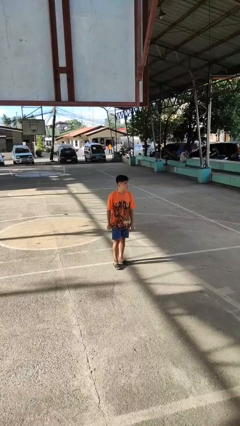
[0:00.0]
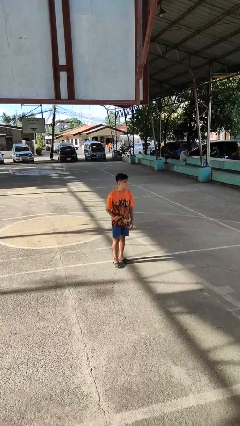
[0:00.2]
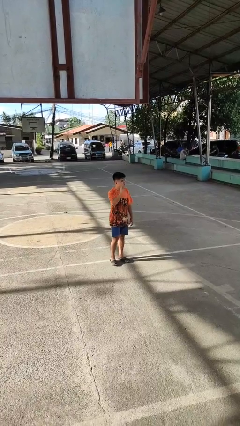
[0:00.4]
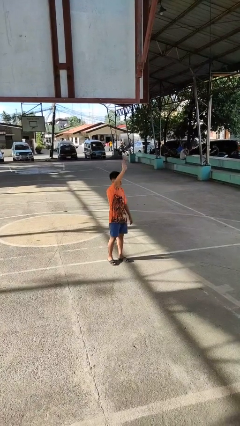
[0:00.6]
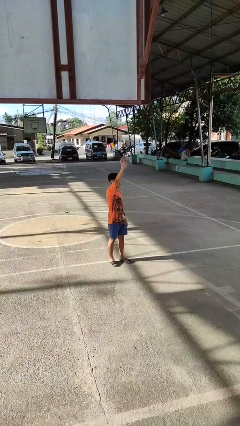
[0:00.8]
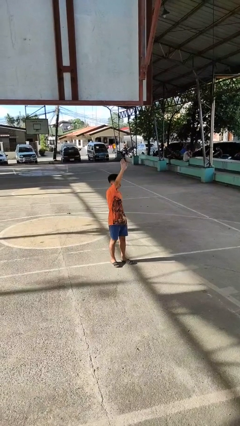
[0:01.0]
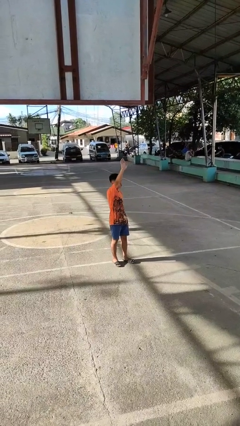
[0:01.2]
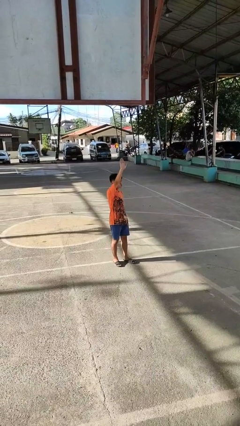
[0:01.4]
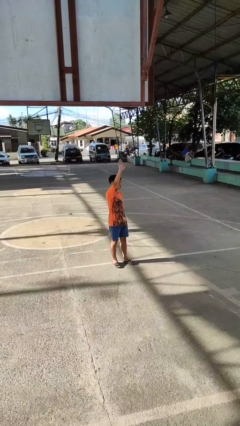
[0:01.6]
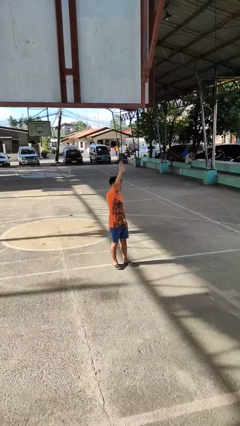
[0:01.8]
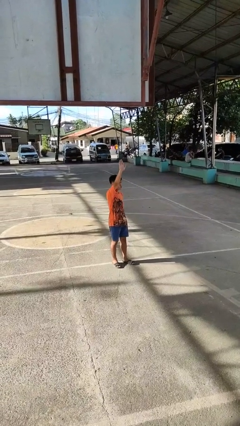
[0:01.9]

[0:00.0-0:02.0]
person gestures raise hand

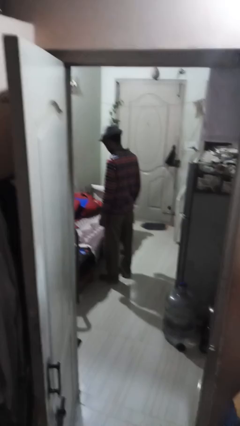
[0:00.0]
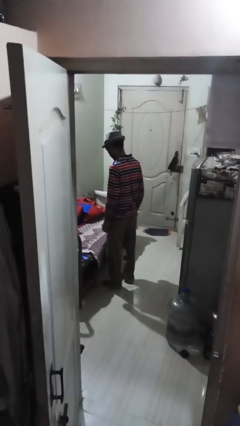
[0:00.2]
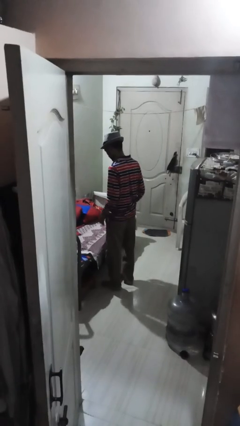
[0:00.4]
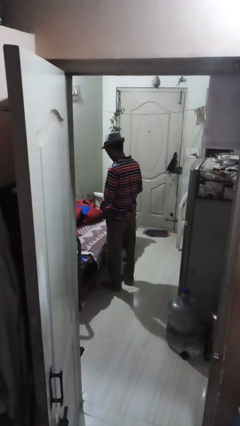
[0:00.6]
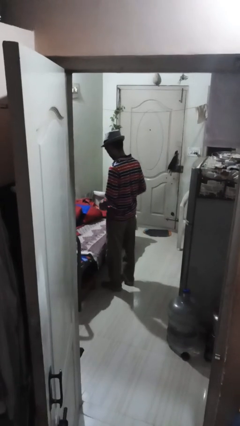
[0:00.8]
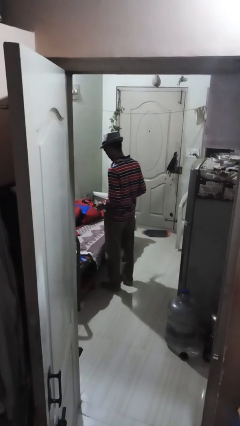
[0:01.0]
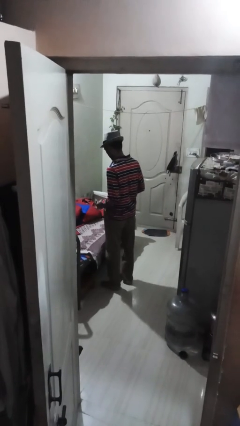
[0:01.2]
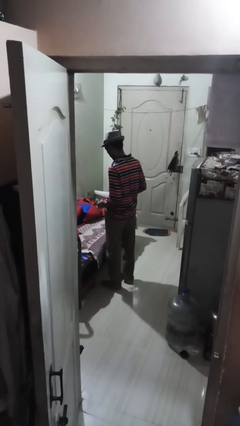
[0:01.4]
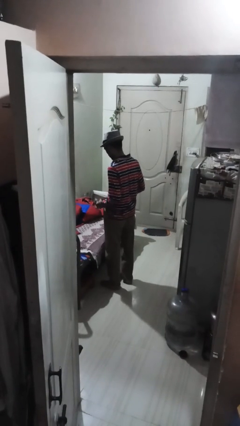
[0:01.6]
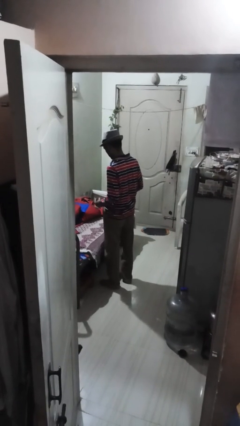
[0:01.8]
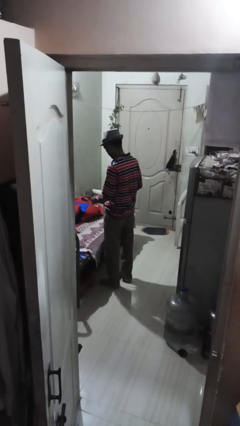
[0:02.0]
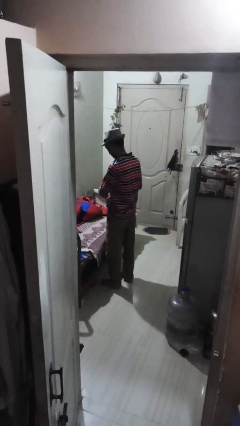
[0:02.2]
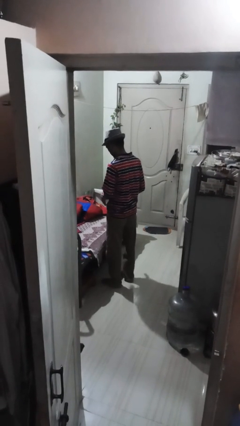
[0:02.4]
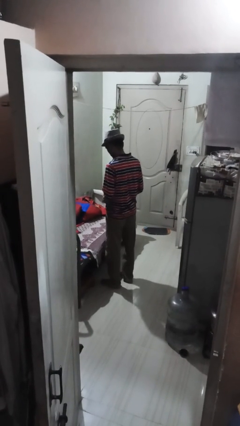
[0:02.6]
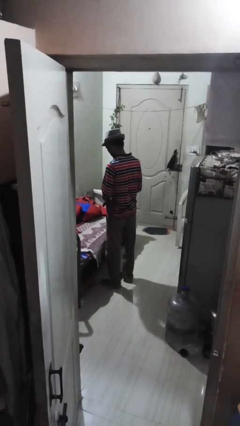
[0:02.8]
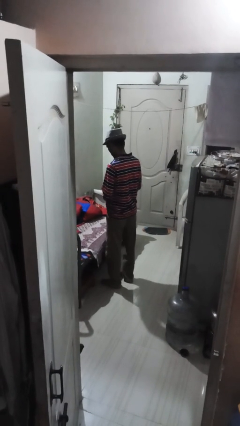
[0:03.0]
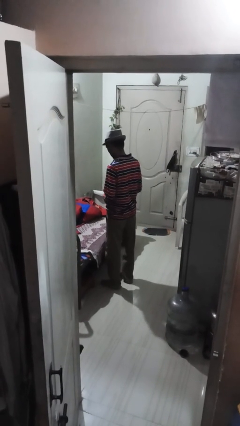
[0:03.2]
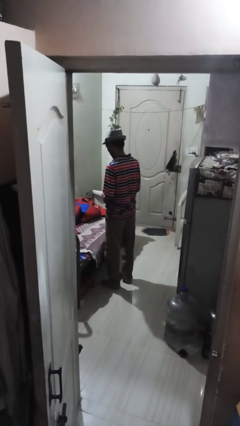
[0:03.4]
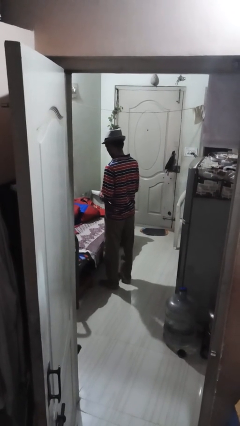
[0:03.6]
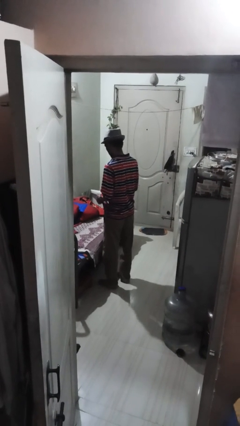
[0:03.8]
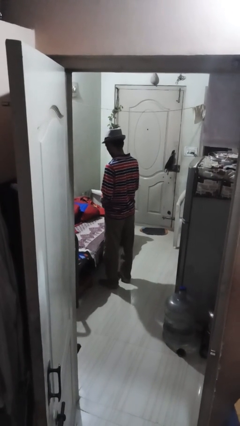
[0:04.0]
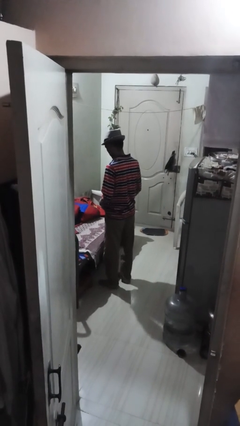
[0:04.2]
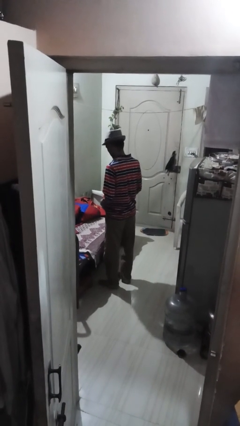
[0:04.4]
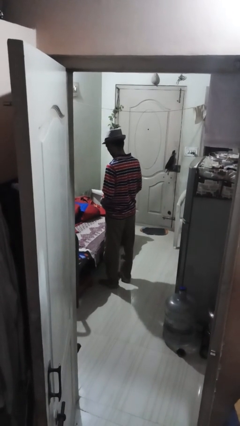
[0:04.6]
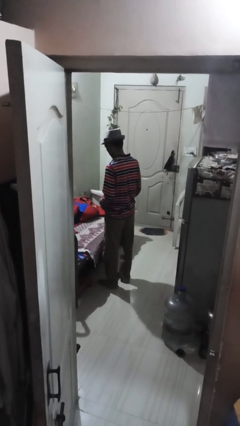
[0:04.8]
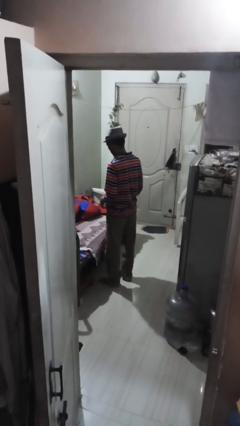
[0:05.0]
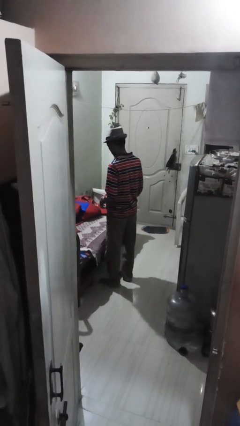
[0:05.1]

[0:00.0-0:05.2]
person puts on belt

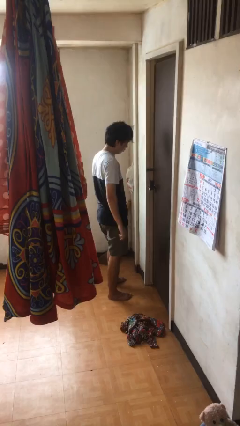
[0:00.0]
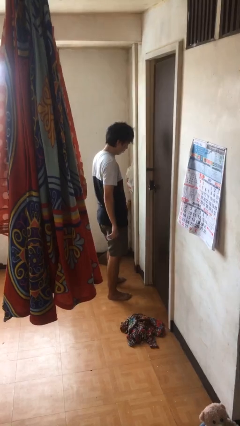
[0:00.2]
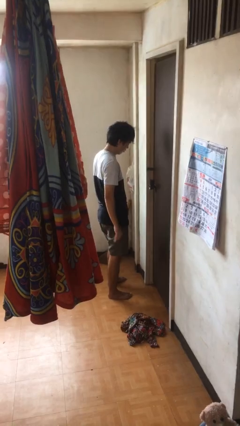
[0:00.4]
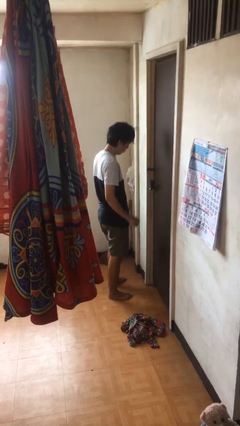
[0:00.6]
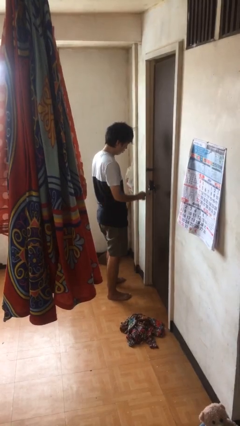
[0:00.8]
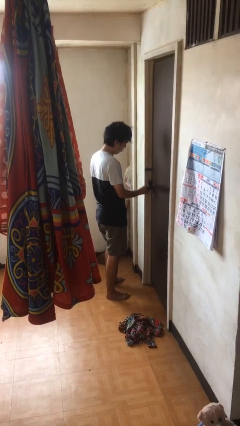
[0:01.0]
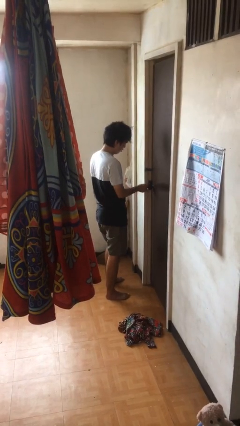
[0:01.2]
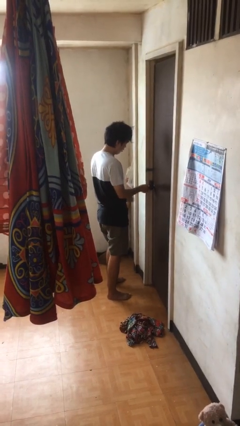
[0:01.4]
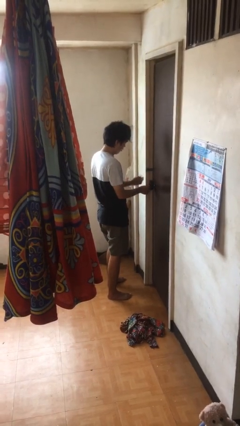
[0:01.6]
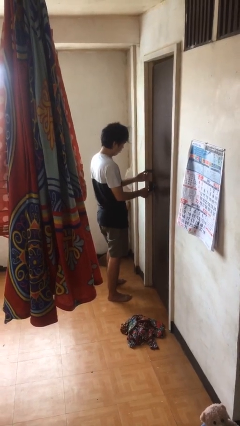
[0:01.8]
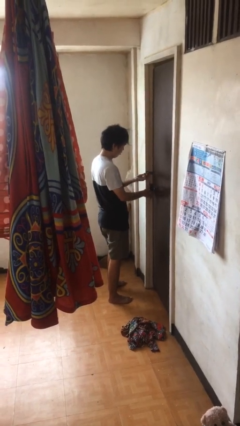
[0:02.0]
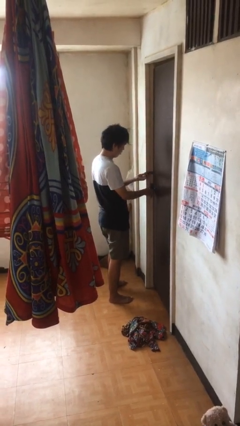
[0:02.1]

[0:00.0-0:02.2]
person unlocks door with keys

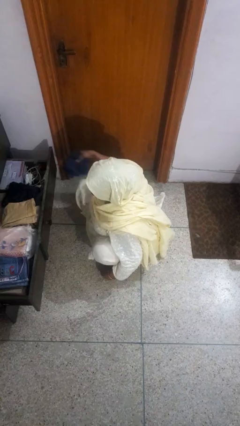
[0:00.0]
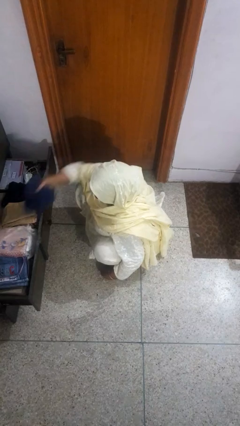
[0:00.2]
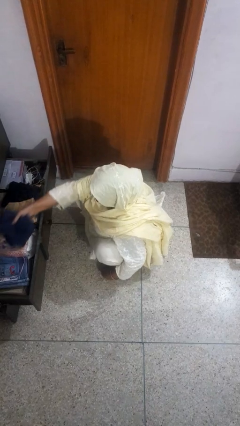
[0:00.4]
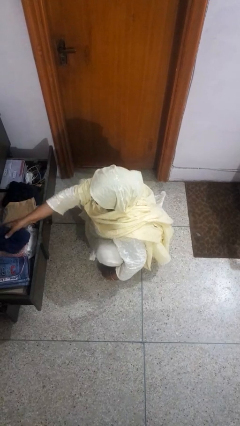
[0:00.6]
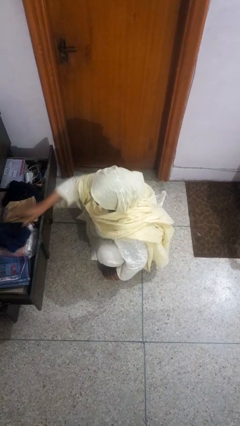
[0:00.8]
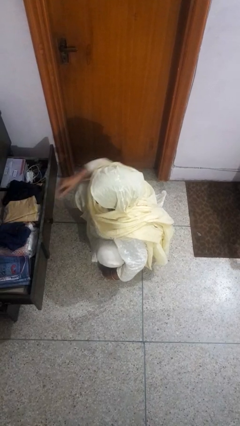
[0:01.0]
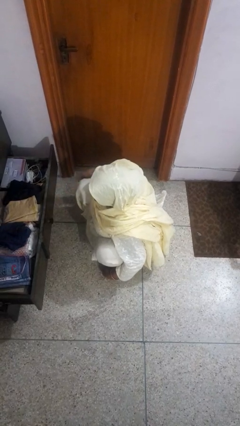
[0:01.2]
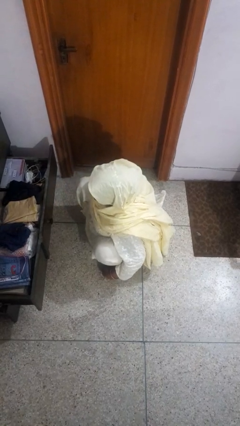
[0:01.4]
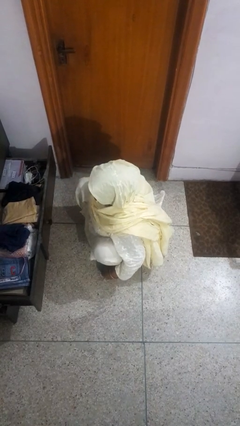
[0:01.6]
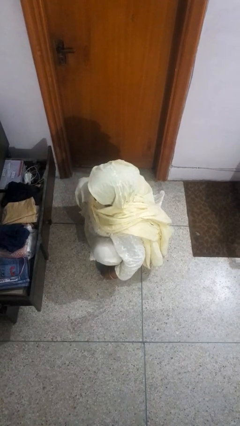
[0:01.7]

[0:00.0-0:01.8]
person puts clothes into dresser

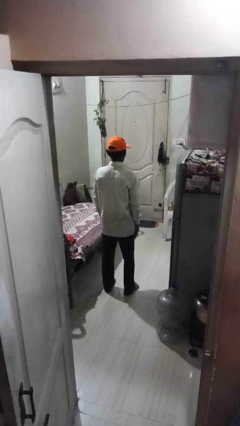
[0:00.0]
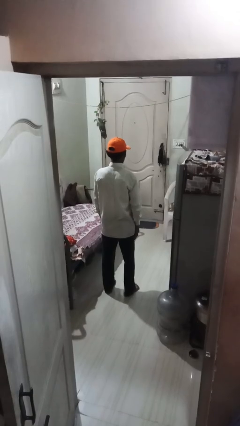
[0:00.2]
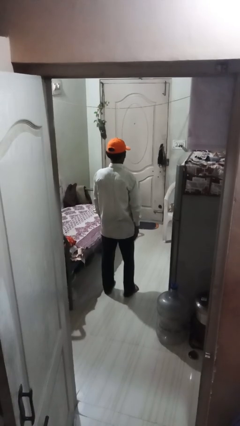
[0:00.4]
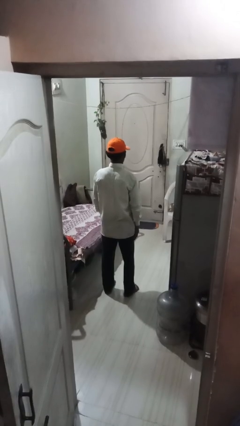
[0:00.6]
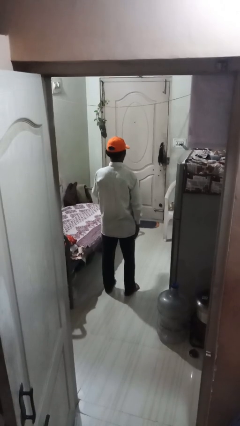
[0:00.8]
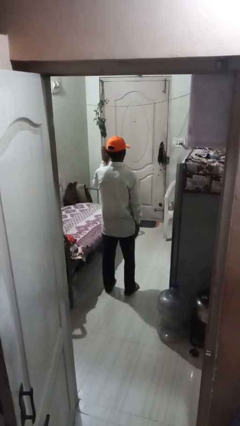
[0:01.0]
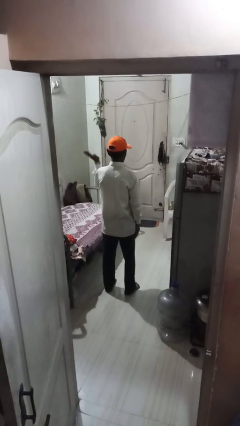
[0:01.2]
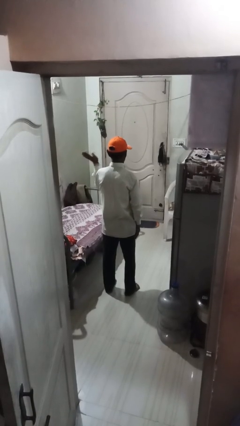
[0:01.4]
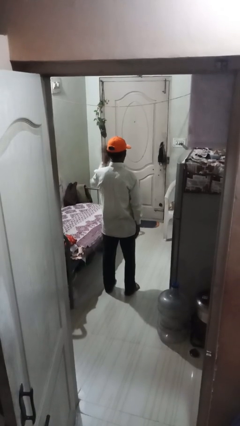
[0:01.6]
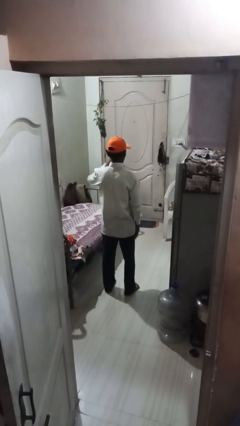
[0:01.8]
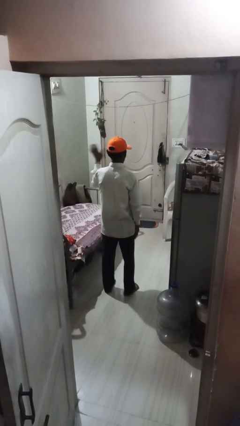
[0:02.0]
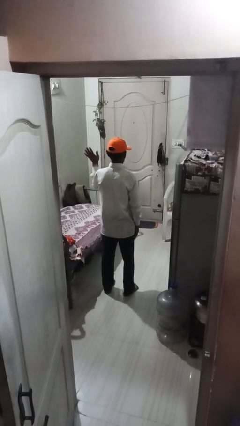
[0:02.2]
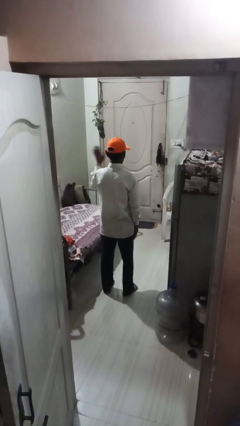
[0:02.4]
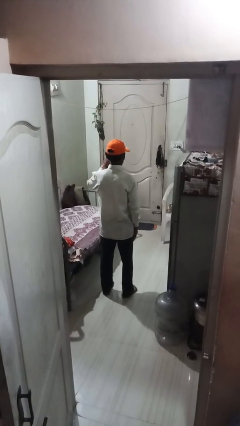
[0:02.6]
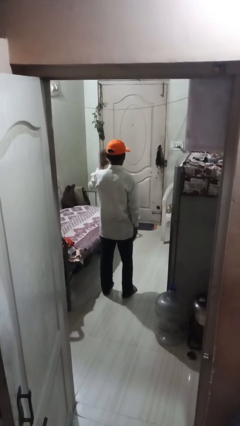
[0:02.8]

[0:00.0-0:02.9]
person waves at person

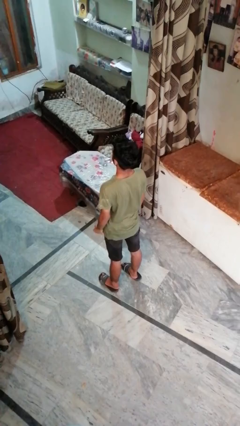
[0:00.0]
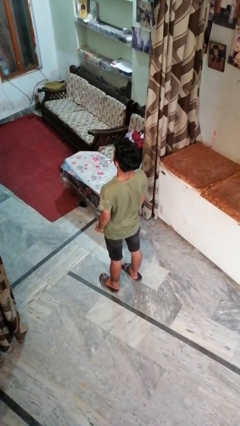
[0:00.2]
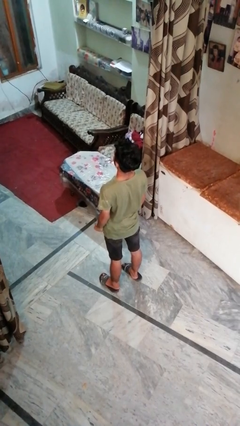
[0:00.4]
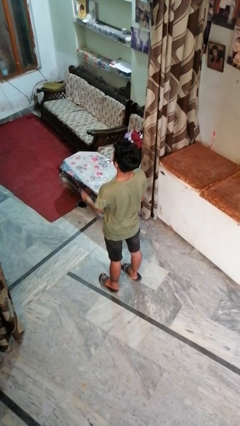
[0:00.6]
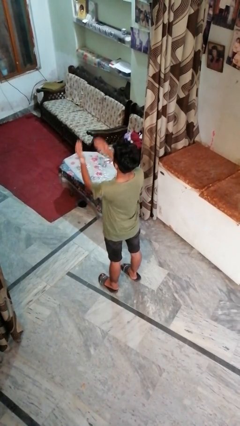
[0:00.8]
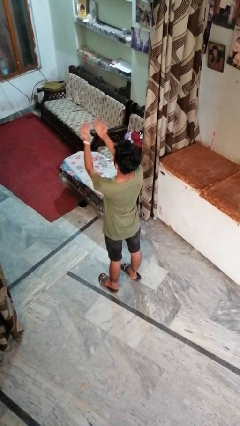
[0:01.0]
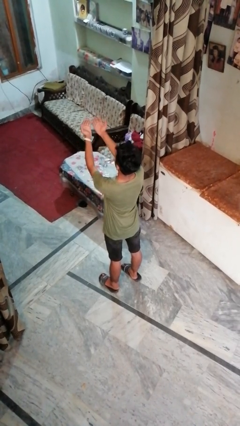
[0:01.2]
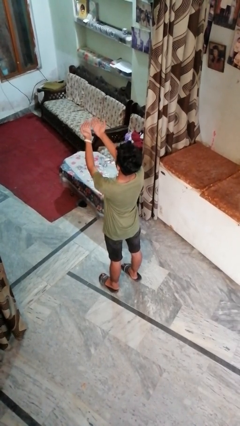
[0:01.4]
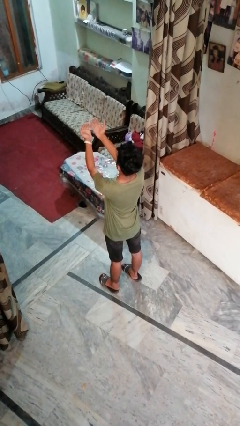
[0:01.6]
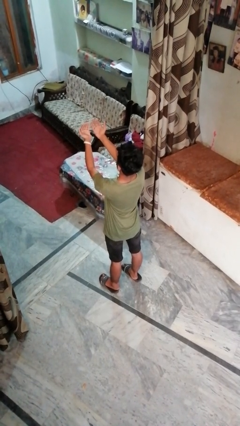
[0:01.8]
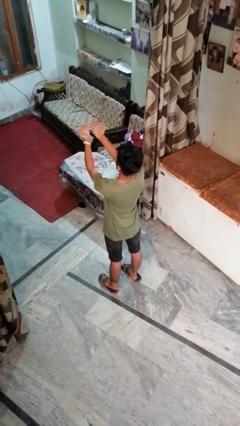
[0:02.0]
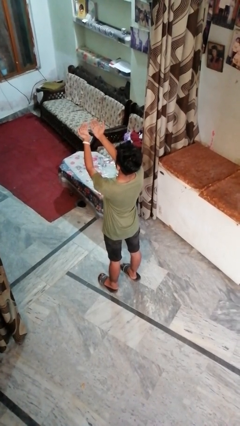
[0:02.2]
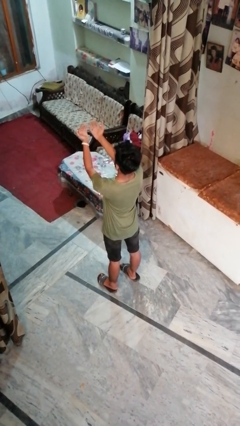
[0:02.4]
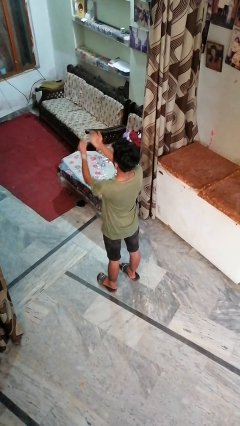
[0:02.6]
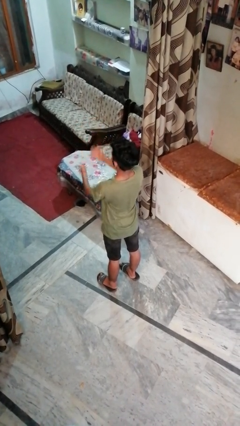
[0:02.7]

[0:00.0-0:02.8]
person prays

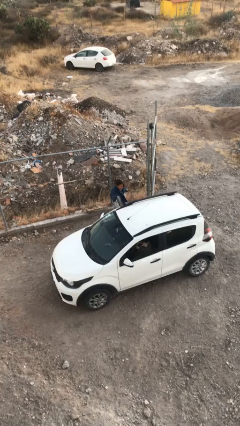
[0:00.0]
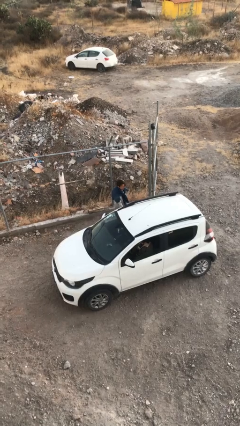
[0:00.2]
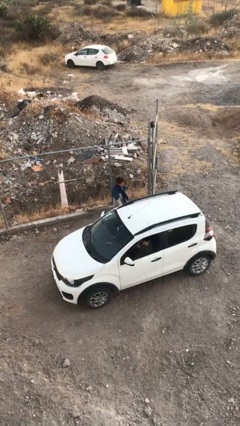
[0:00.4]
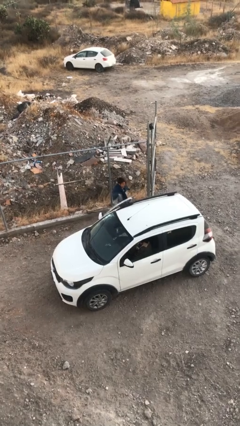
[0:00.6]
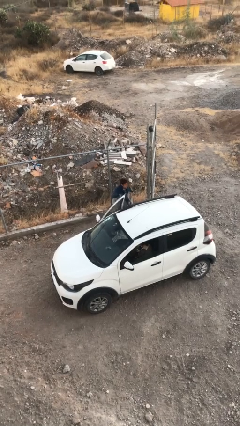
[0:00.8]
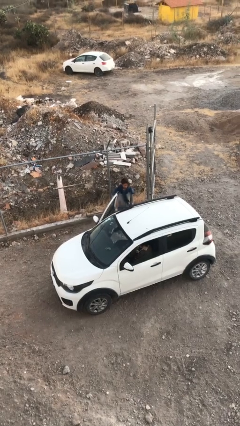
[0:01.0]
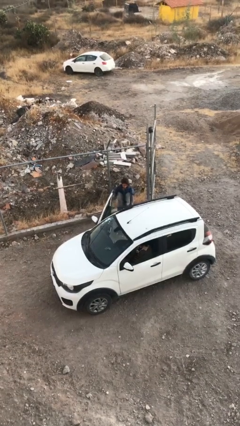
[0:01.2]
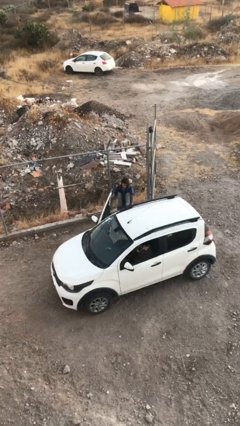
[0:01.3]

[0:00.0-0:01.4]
person opens car door
